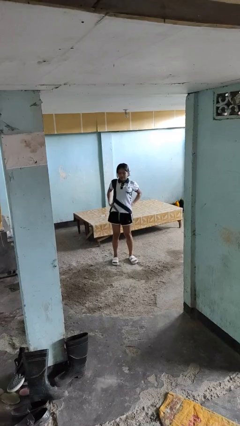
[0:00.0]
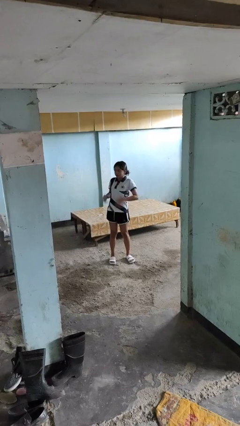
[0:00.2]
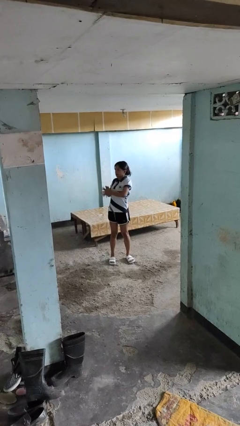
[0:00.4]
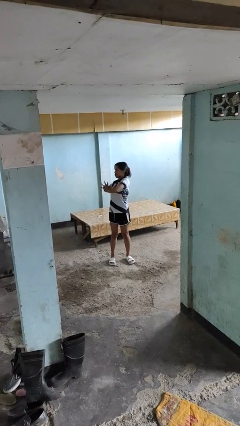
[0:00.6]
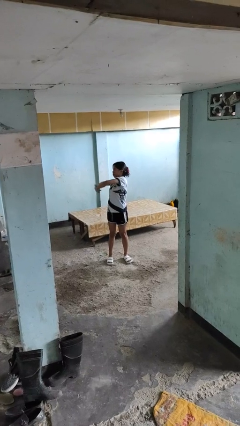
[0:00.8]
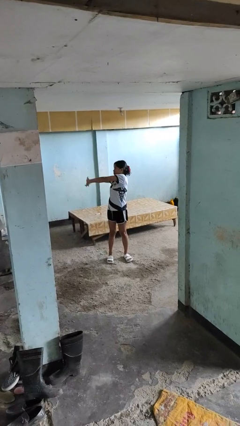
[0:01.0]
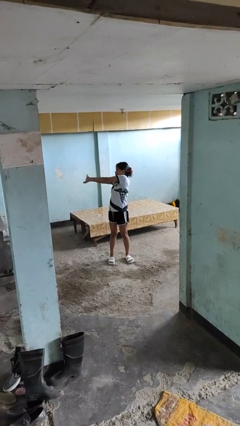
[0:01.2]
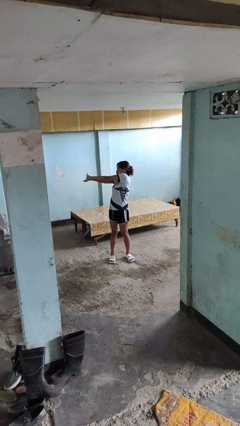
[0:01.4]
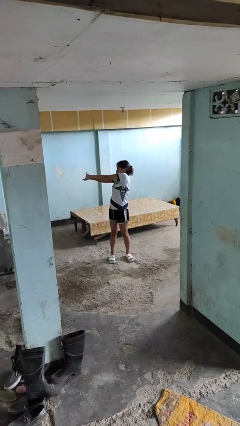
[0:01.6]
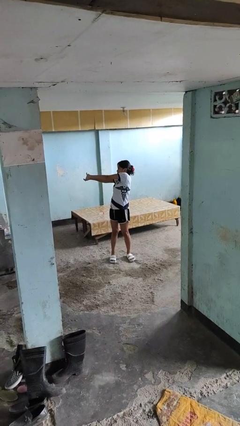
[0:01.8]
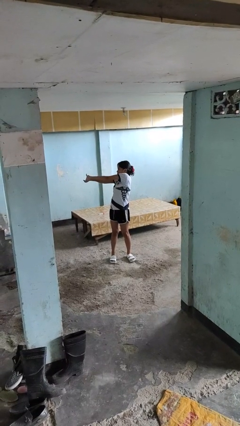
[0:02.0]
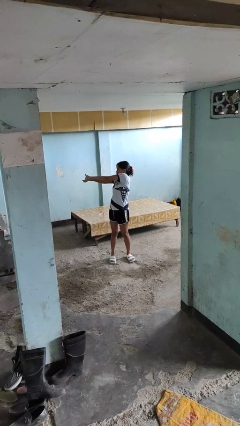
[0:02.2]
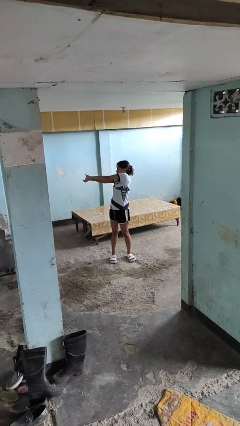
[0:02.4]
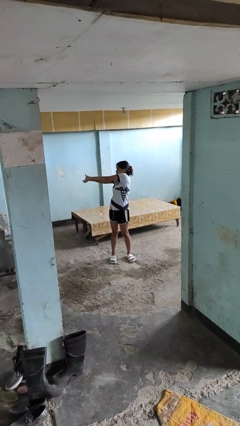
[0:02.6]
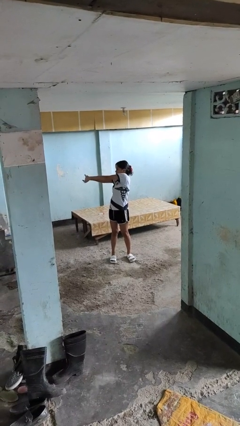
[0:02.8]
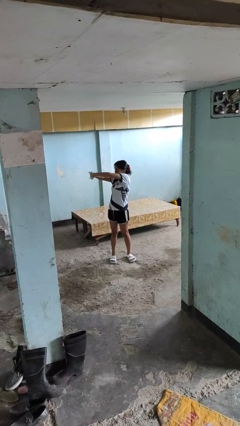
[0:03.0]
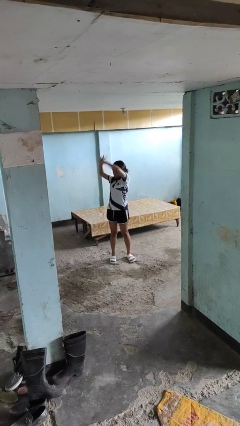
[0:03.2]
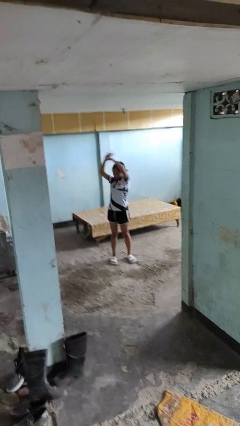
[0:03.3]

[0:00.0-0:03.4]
person stretches arms to side

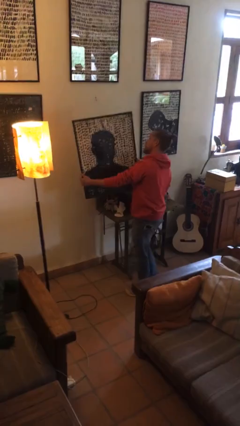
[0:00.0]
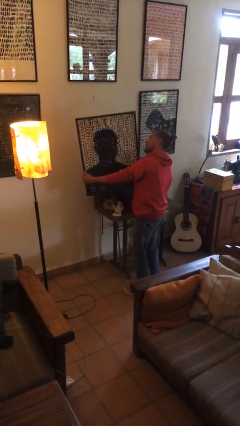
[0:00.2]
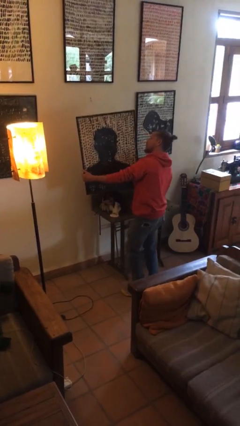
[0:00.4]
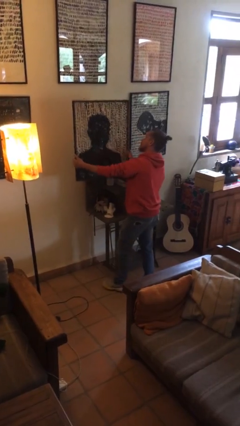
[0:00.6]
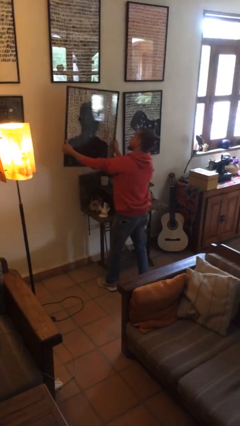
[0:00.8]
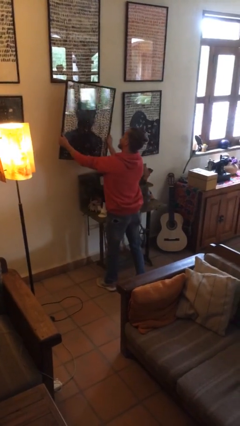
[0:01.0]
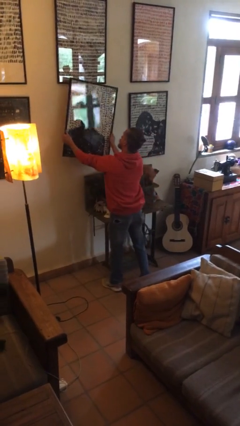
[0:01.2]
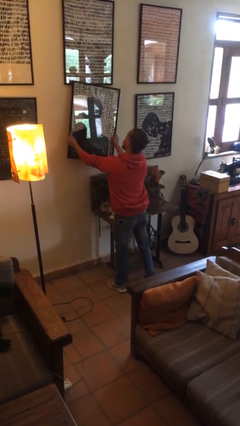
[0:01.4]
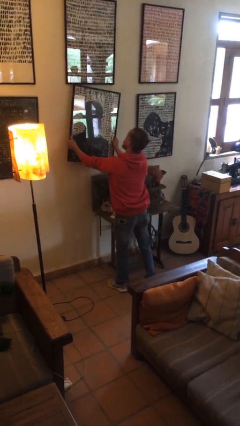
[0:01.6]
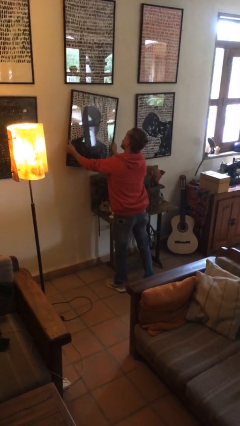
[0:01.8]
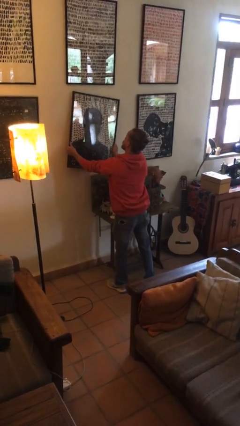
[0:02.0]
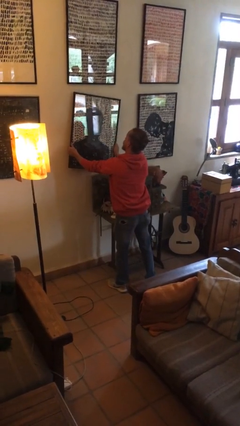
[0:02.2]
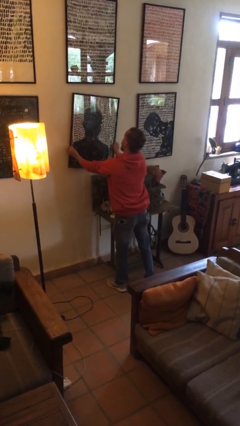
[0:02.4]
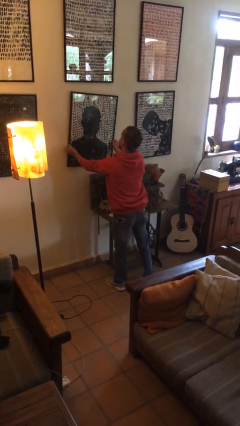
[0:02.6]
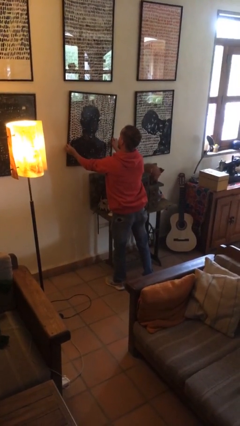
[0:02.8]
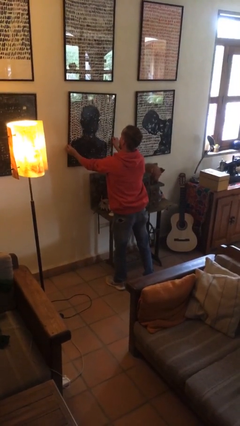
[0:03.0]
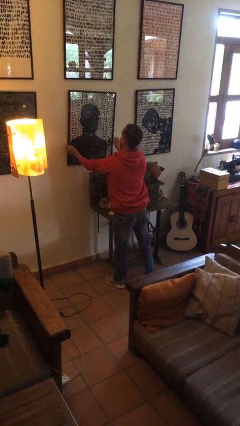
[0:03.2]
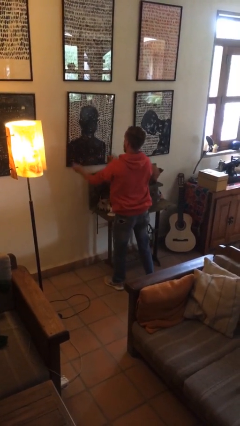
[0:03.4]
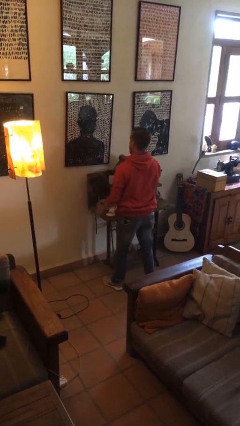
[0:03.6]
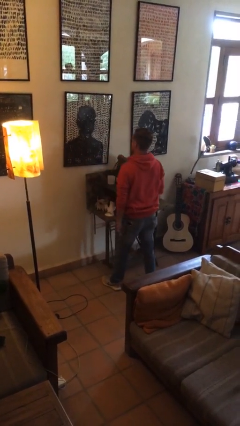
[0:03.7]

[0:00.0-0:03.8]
person puts up picture frame

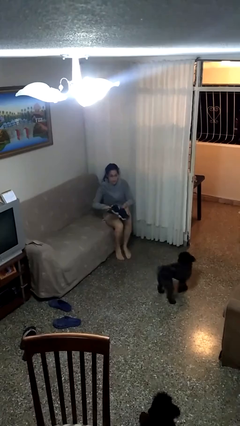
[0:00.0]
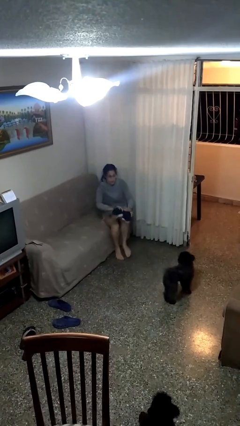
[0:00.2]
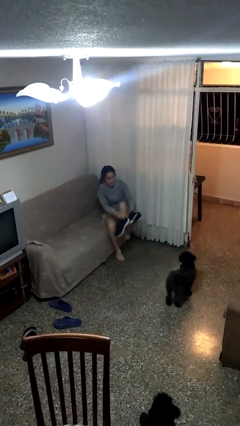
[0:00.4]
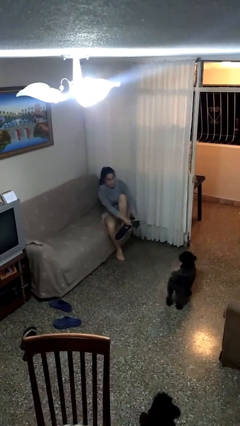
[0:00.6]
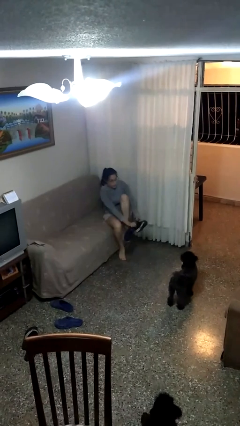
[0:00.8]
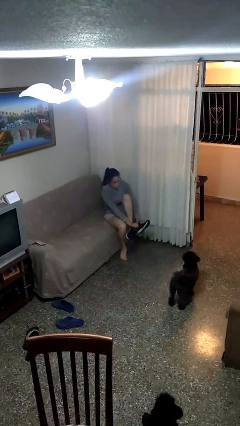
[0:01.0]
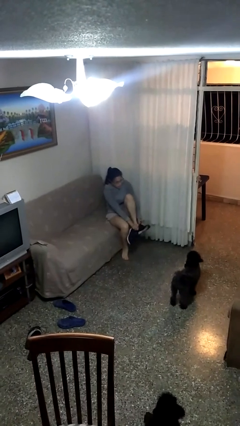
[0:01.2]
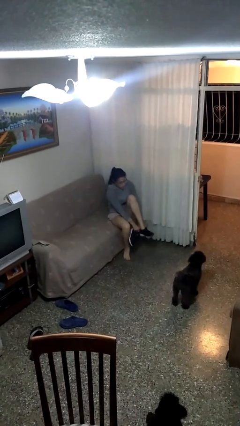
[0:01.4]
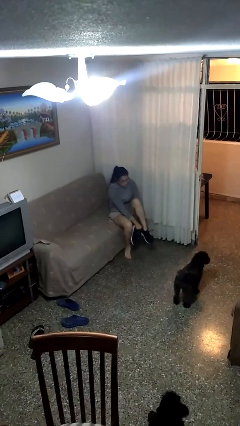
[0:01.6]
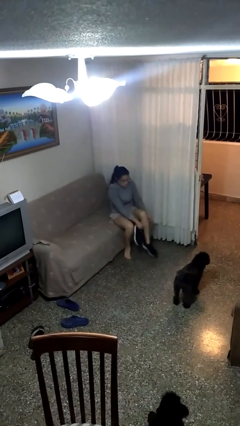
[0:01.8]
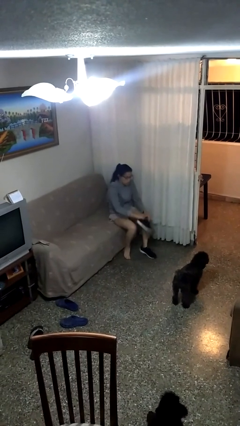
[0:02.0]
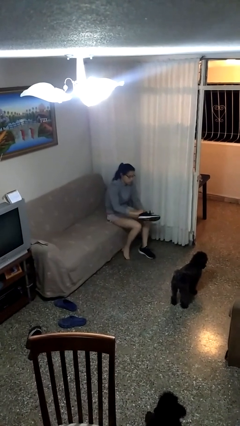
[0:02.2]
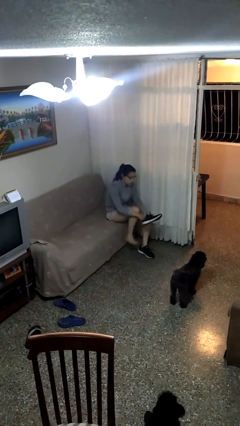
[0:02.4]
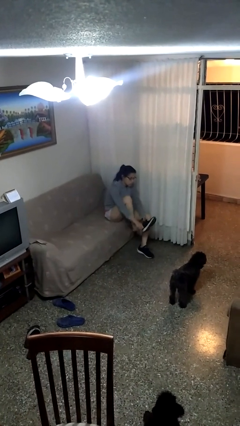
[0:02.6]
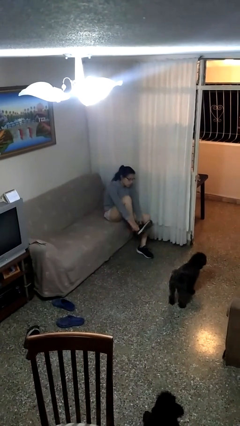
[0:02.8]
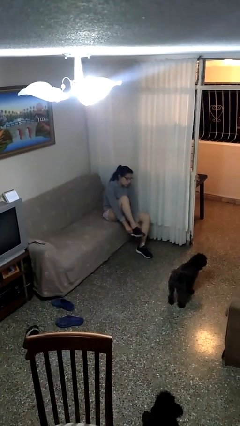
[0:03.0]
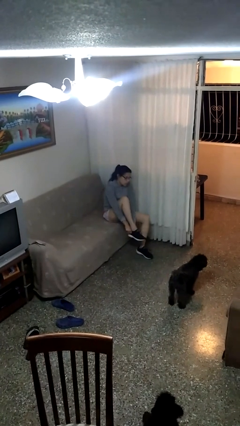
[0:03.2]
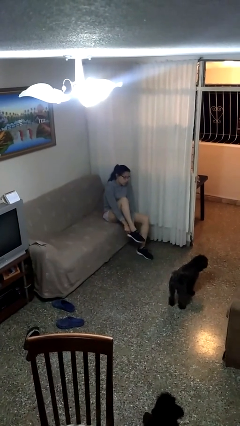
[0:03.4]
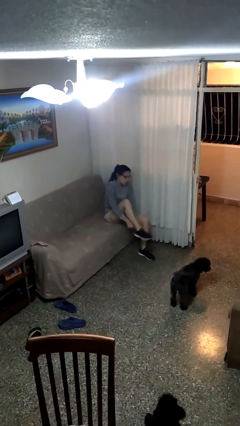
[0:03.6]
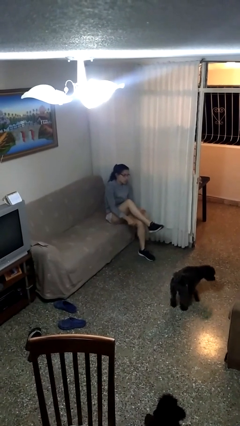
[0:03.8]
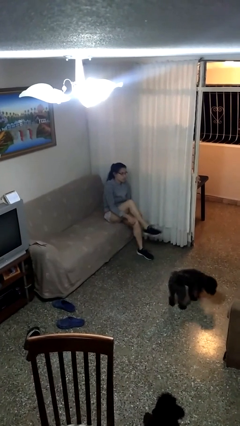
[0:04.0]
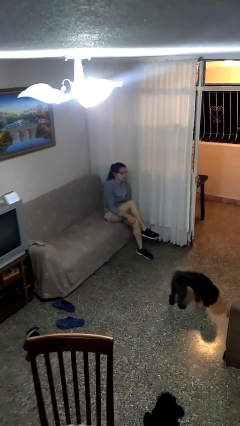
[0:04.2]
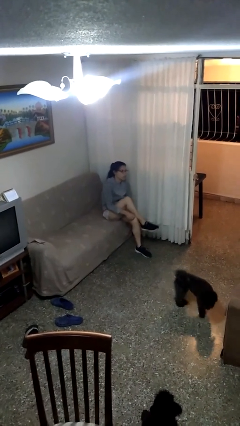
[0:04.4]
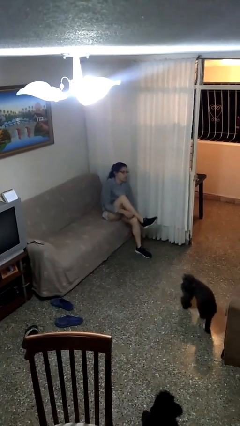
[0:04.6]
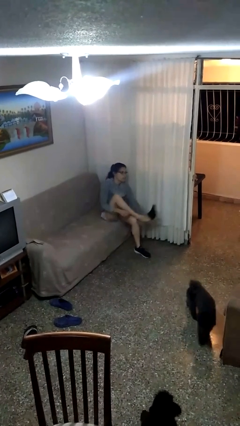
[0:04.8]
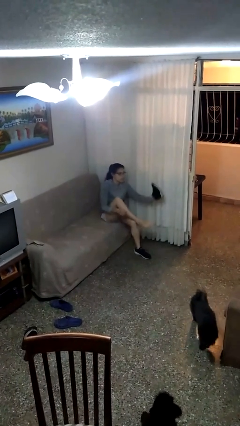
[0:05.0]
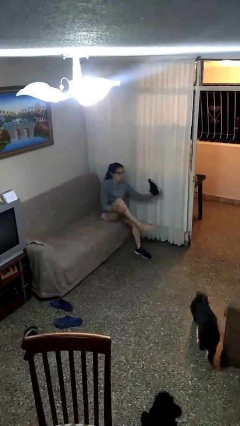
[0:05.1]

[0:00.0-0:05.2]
person puts on shoes

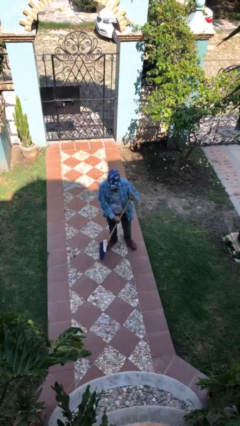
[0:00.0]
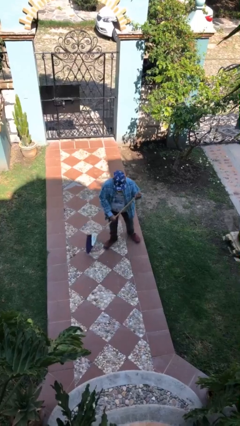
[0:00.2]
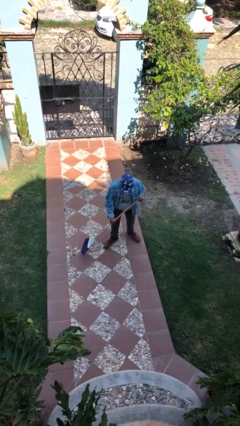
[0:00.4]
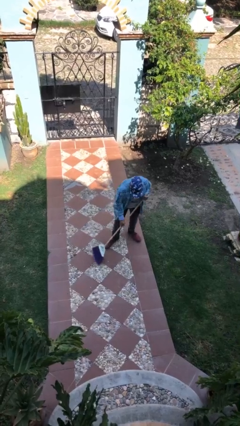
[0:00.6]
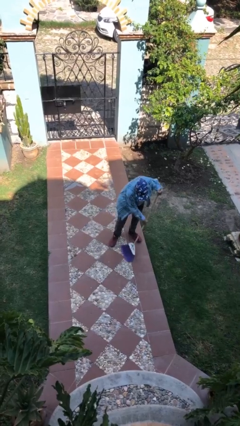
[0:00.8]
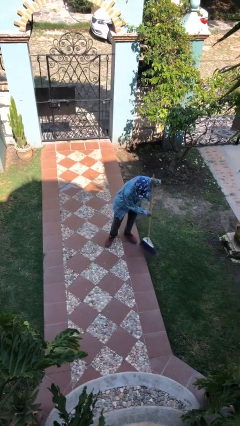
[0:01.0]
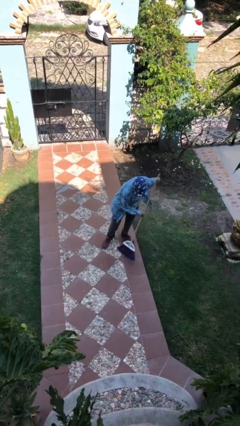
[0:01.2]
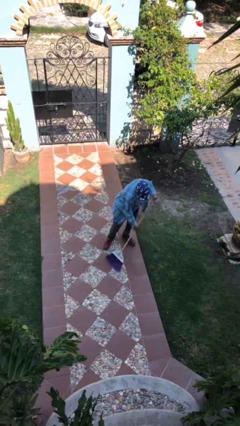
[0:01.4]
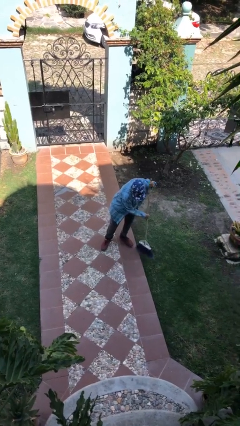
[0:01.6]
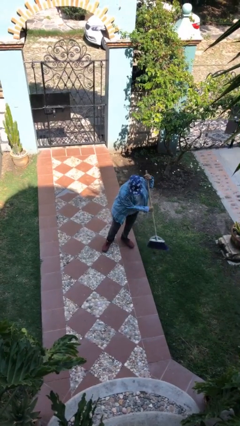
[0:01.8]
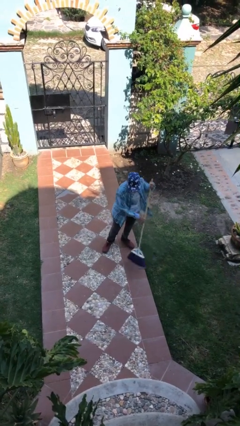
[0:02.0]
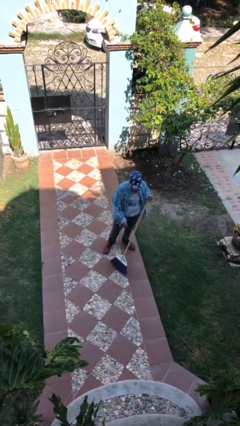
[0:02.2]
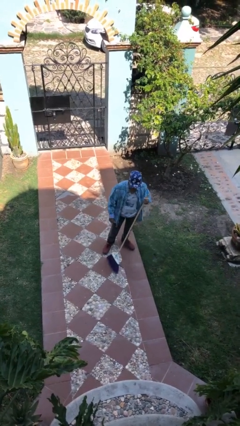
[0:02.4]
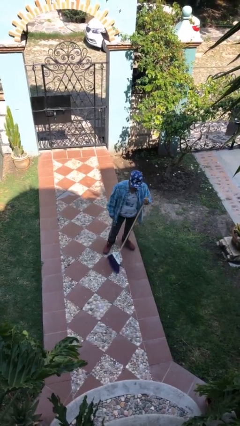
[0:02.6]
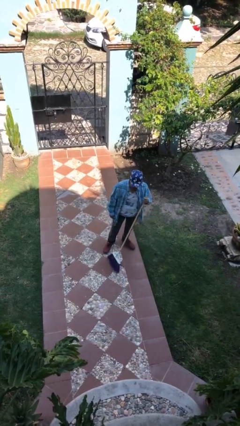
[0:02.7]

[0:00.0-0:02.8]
person sweeps floor

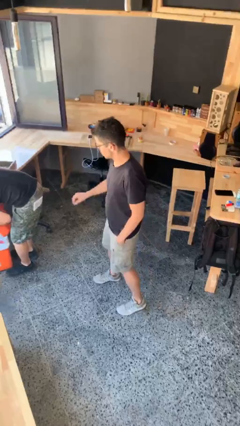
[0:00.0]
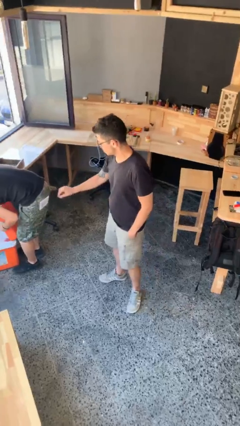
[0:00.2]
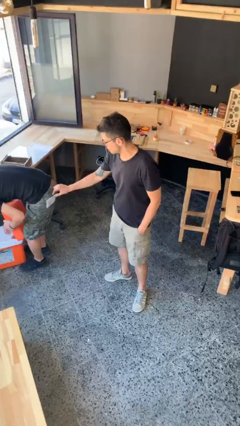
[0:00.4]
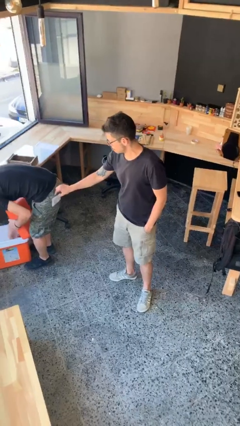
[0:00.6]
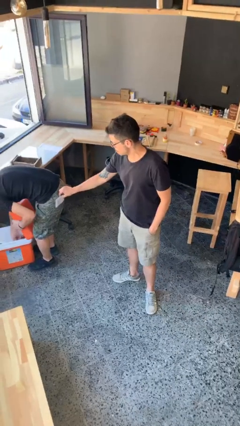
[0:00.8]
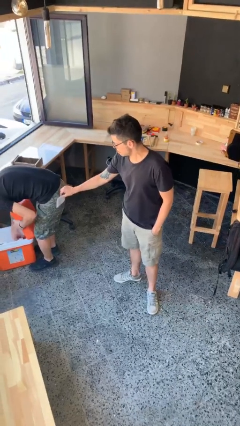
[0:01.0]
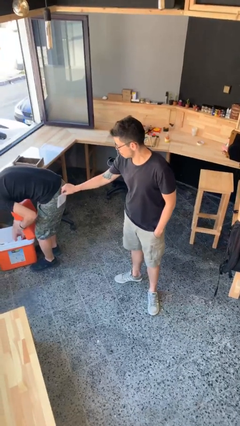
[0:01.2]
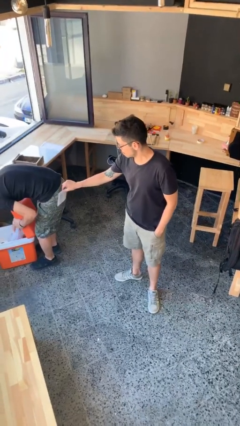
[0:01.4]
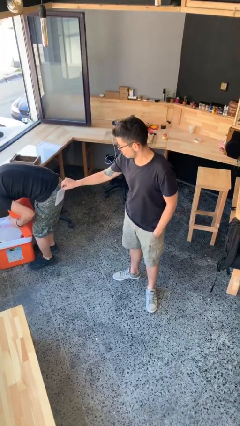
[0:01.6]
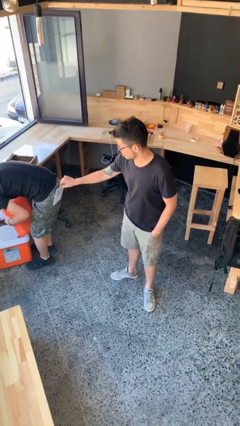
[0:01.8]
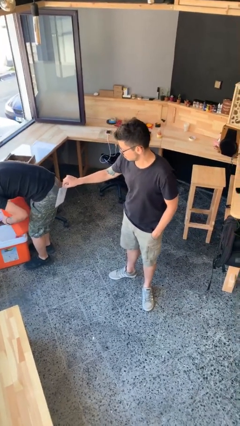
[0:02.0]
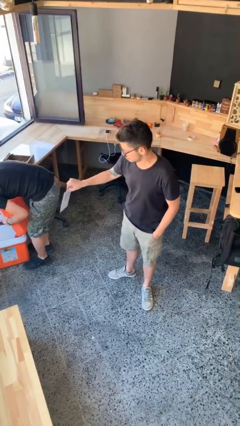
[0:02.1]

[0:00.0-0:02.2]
person steals object from person
